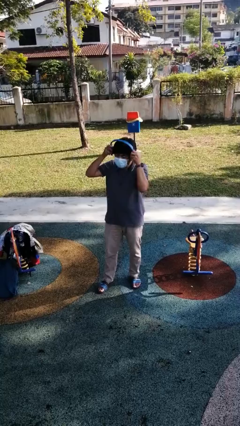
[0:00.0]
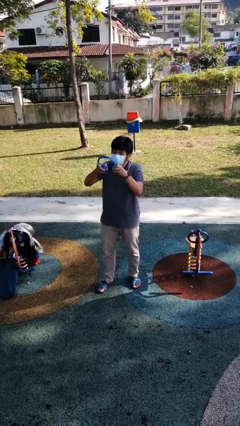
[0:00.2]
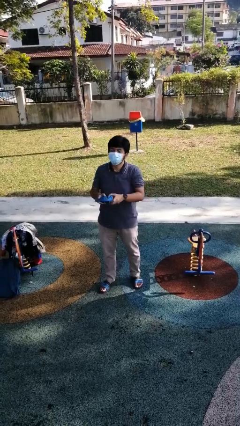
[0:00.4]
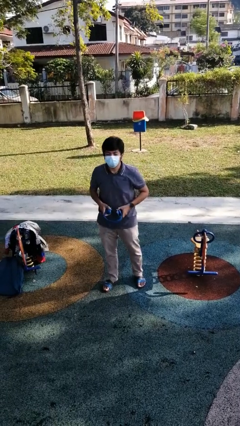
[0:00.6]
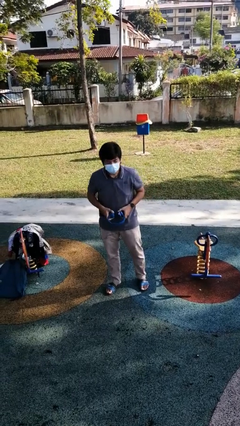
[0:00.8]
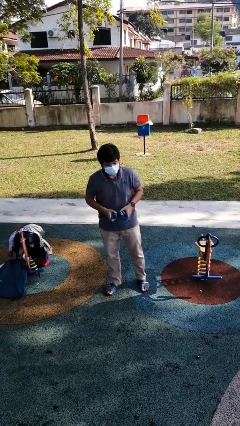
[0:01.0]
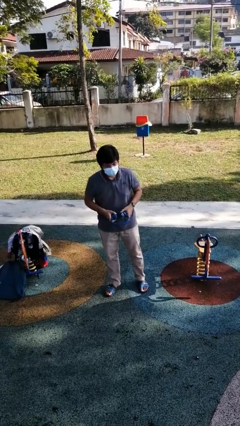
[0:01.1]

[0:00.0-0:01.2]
person takes off headphones

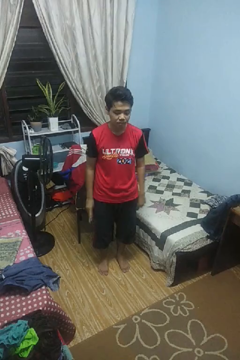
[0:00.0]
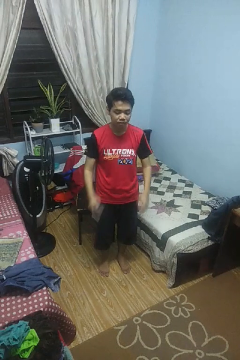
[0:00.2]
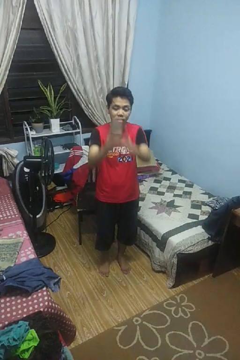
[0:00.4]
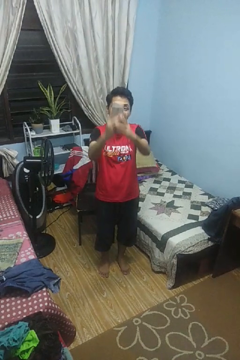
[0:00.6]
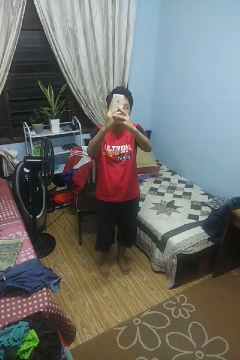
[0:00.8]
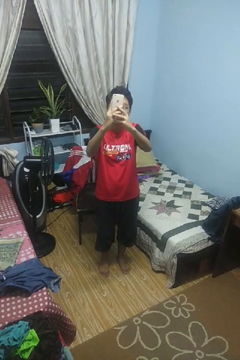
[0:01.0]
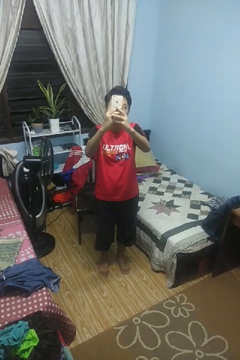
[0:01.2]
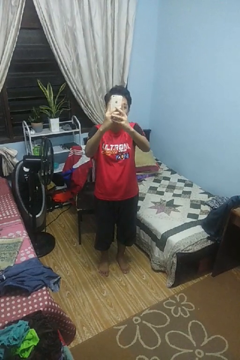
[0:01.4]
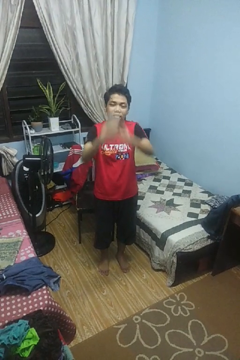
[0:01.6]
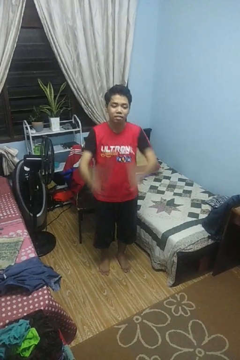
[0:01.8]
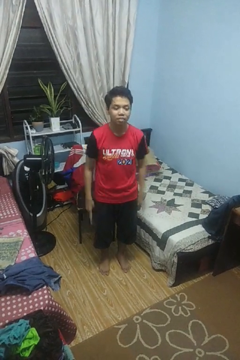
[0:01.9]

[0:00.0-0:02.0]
person takes selfie

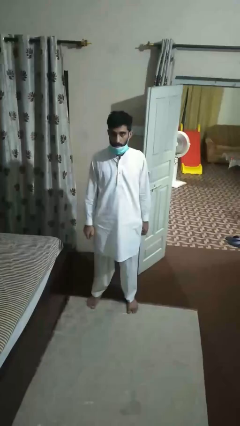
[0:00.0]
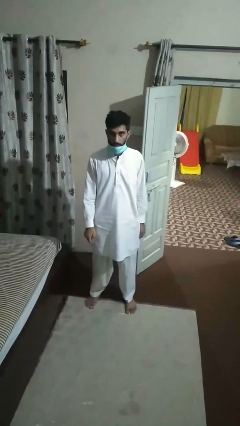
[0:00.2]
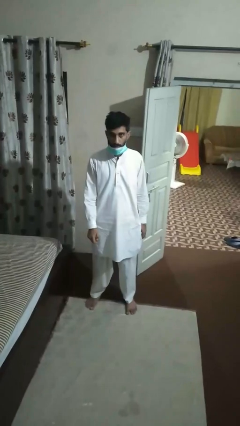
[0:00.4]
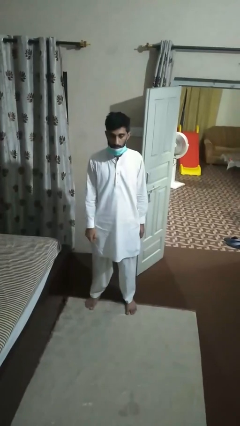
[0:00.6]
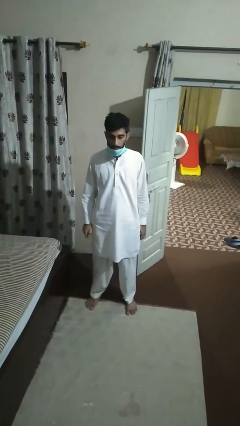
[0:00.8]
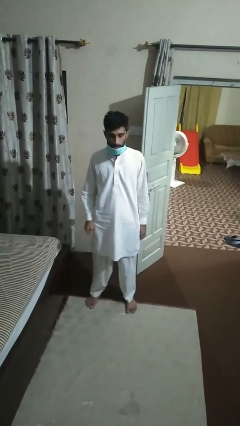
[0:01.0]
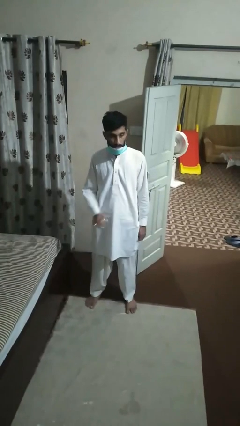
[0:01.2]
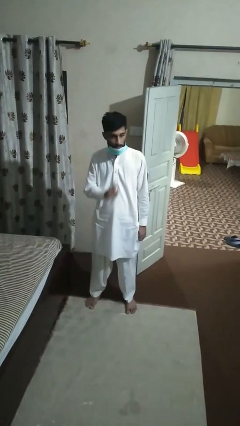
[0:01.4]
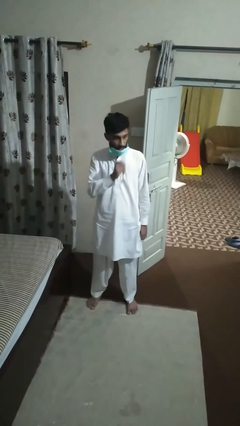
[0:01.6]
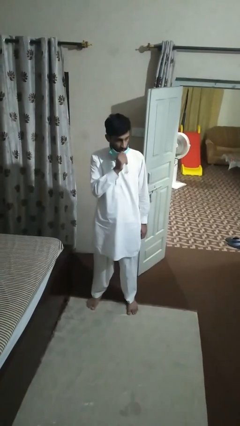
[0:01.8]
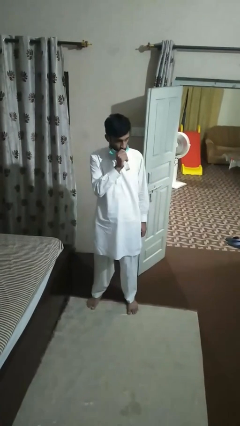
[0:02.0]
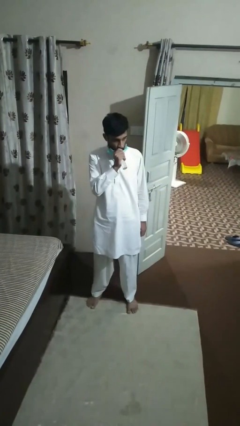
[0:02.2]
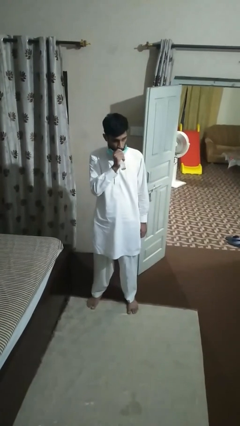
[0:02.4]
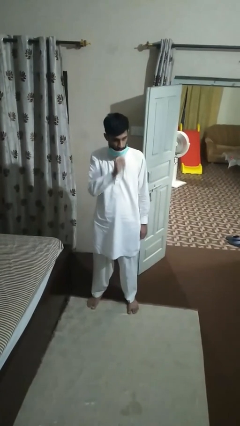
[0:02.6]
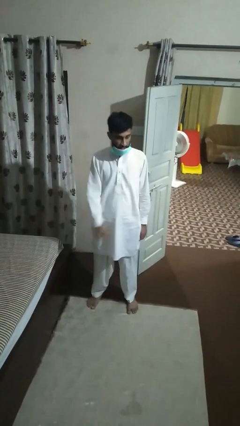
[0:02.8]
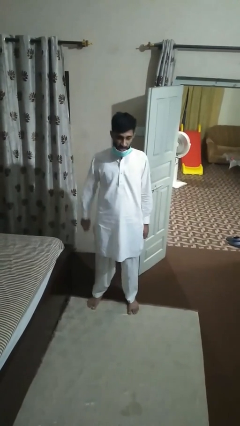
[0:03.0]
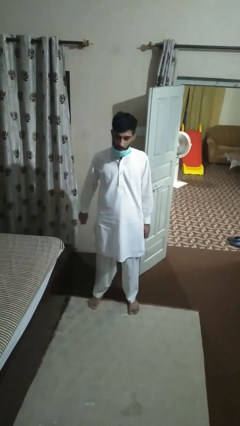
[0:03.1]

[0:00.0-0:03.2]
person vapes

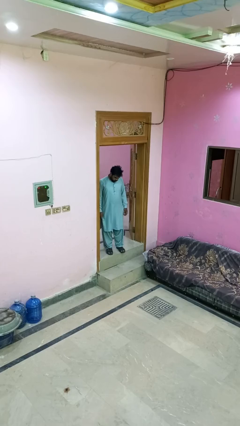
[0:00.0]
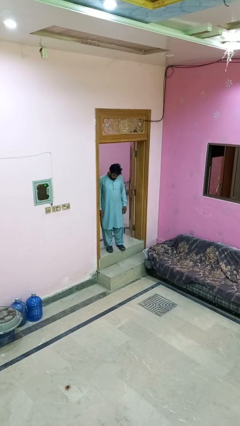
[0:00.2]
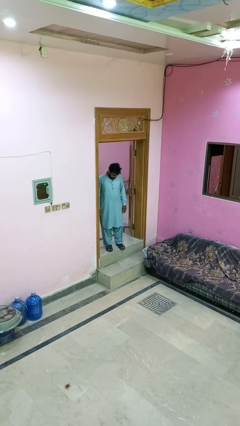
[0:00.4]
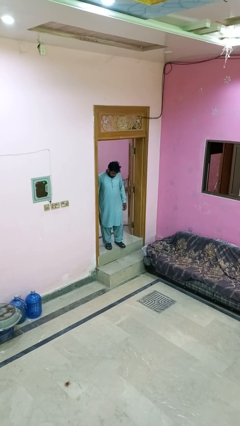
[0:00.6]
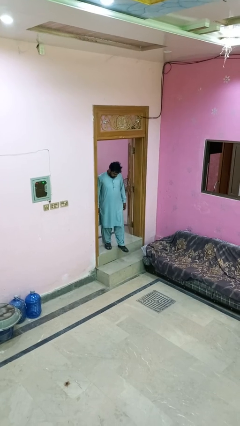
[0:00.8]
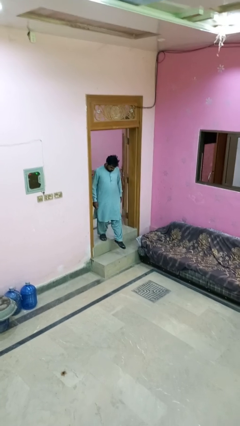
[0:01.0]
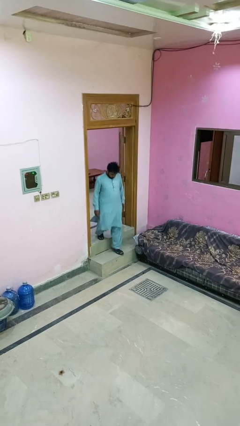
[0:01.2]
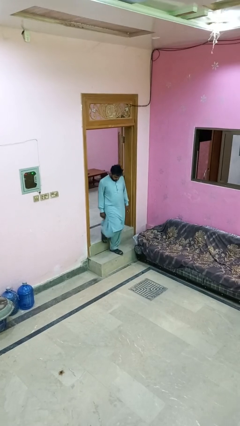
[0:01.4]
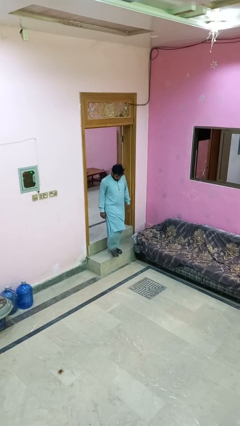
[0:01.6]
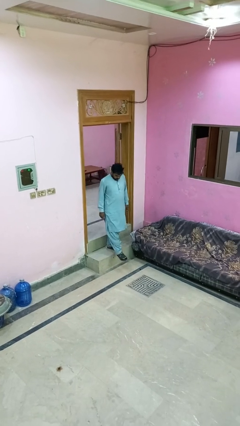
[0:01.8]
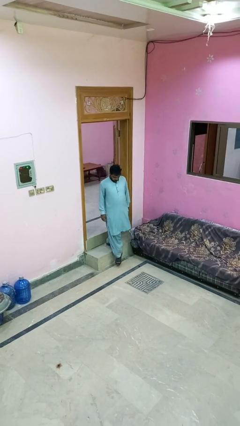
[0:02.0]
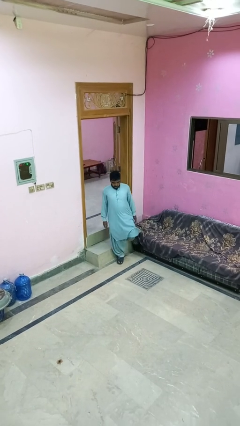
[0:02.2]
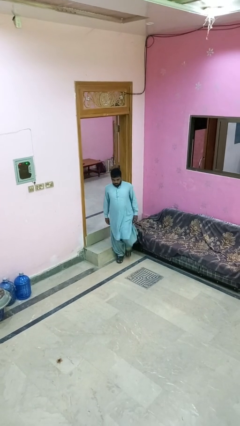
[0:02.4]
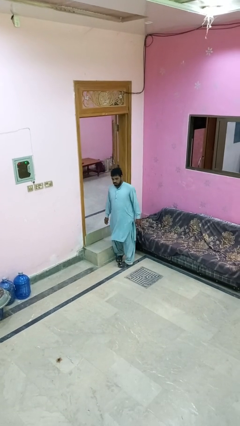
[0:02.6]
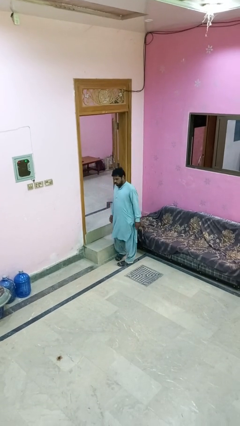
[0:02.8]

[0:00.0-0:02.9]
person climbs down stairs

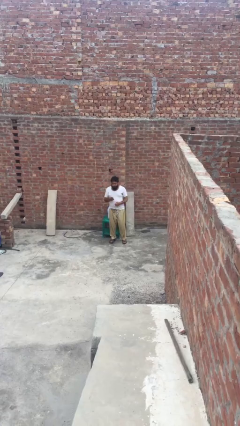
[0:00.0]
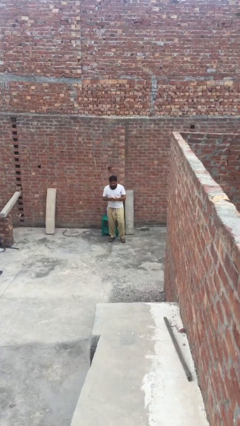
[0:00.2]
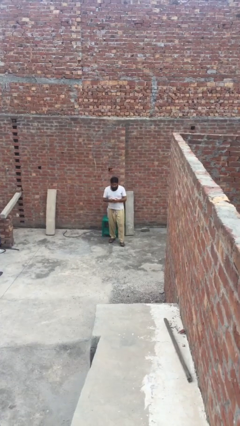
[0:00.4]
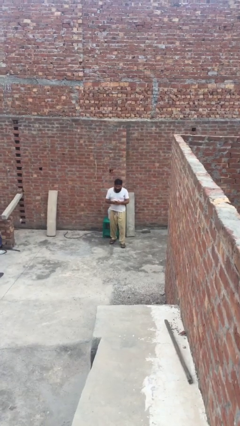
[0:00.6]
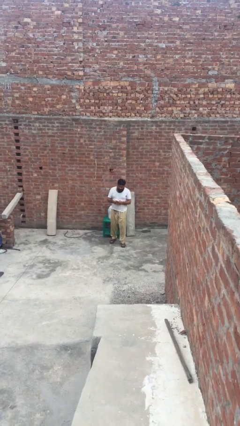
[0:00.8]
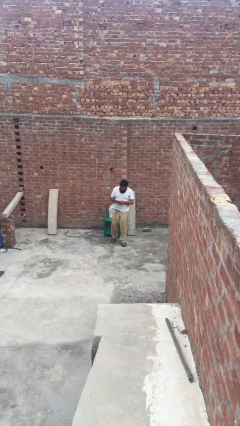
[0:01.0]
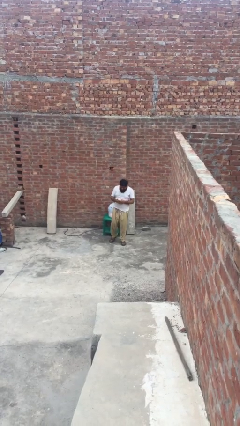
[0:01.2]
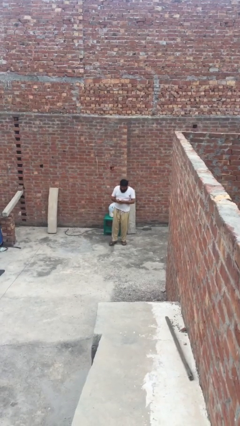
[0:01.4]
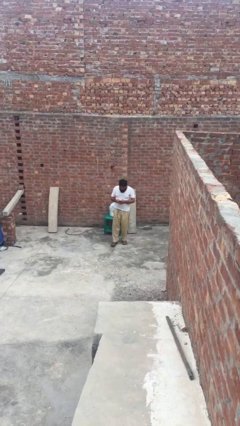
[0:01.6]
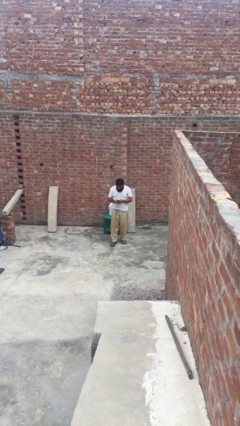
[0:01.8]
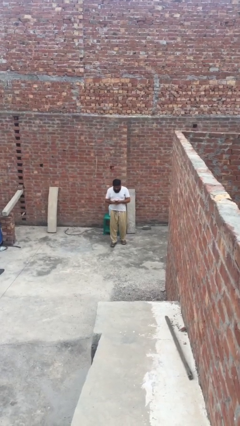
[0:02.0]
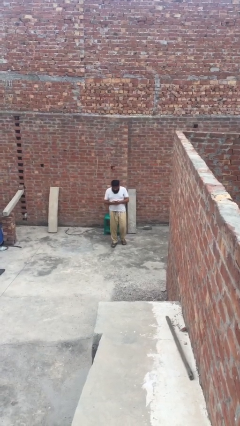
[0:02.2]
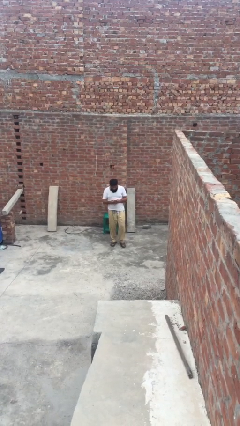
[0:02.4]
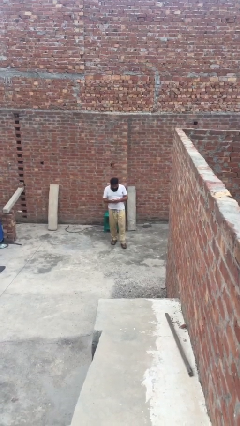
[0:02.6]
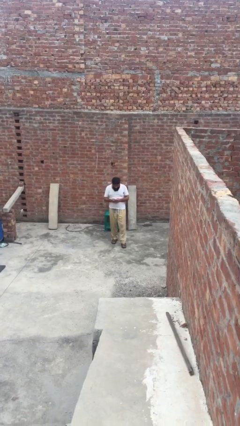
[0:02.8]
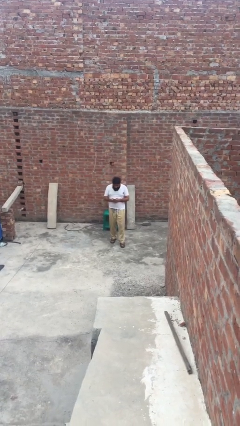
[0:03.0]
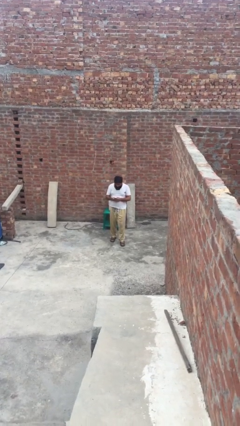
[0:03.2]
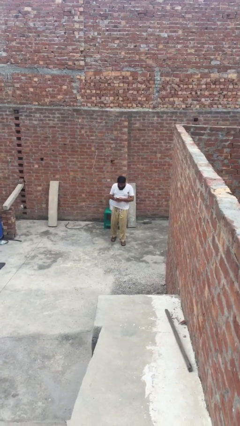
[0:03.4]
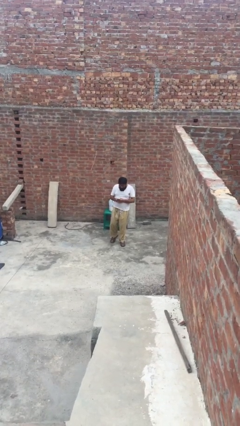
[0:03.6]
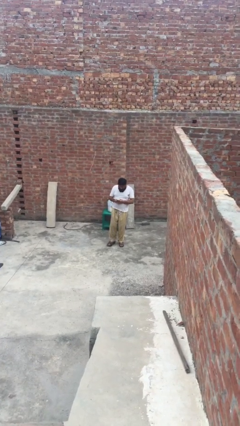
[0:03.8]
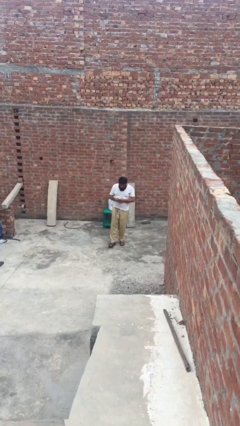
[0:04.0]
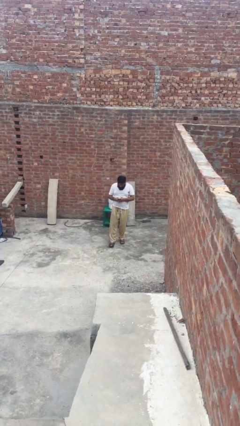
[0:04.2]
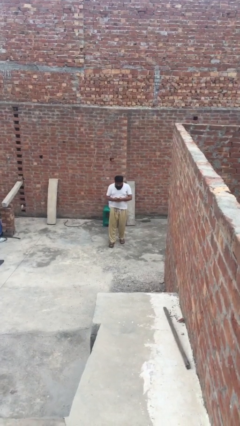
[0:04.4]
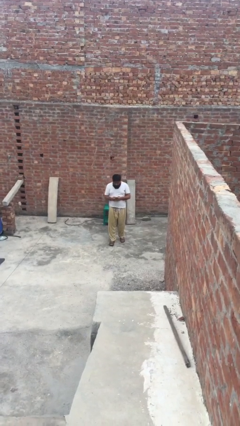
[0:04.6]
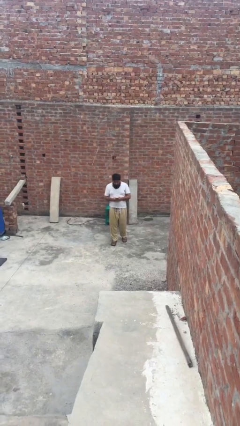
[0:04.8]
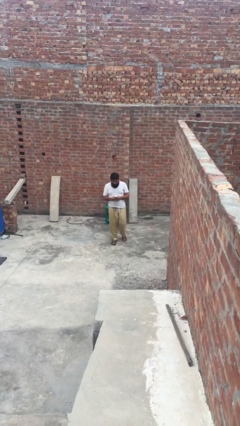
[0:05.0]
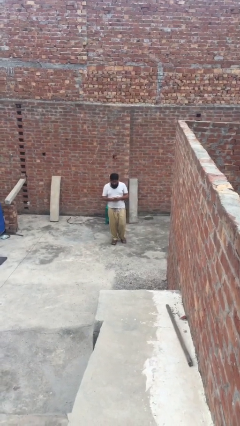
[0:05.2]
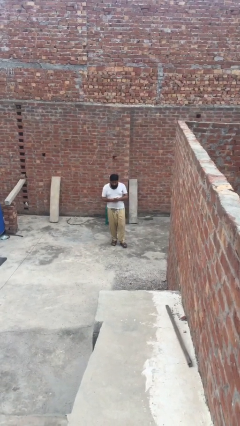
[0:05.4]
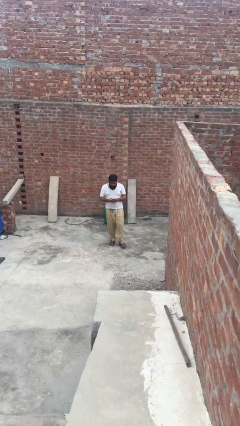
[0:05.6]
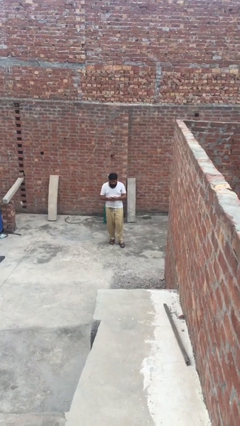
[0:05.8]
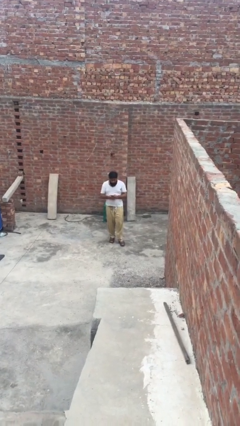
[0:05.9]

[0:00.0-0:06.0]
person texts on phone

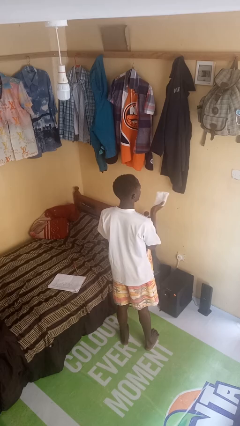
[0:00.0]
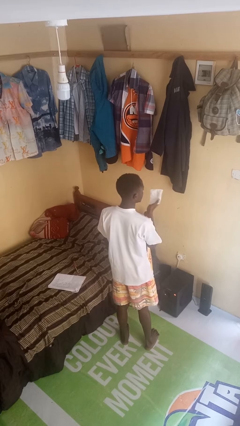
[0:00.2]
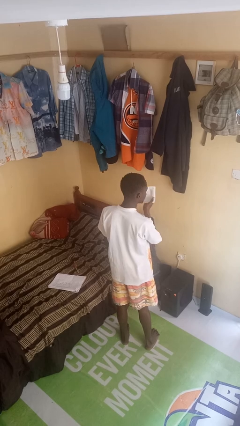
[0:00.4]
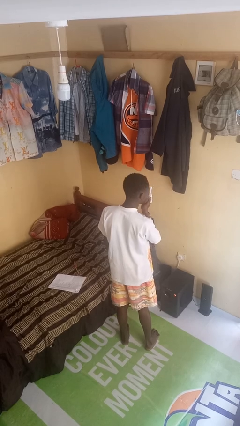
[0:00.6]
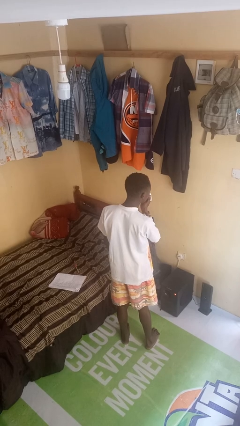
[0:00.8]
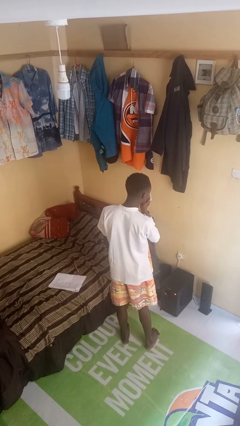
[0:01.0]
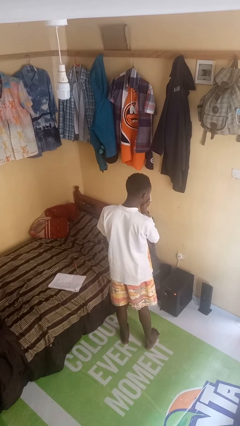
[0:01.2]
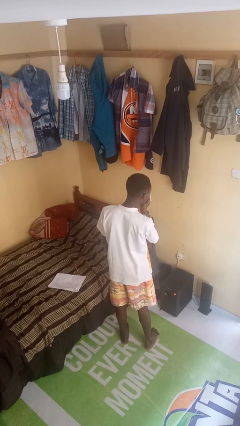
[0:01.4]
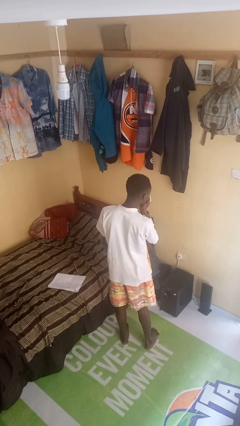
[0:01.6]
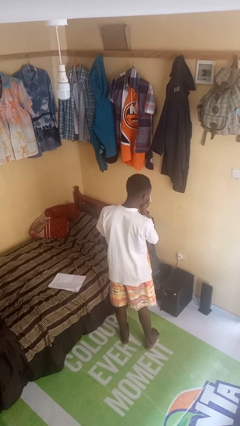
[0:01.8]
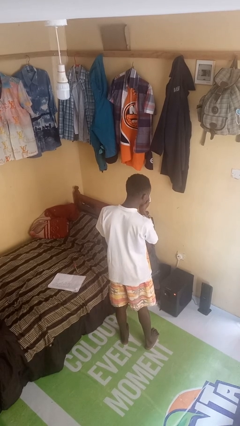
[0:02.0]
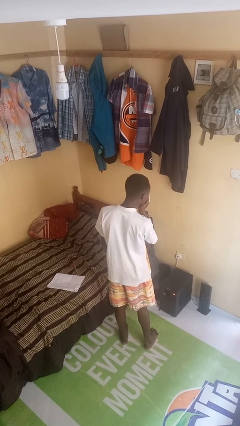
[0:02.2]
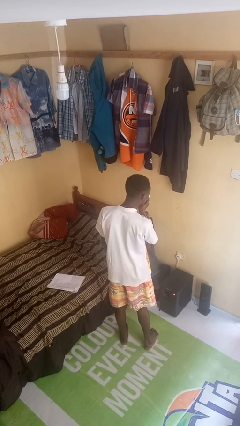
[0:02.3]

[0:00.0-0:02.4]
person blows nose

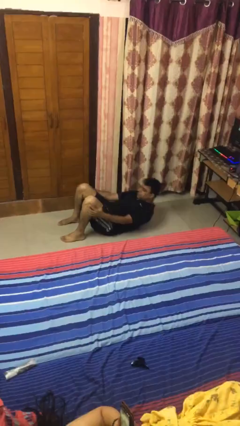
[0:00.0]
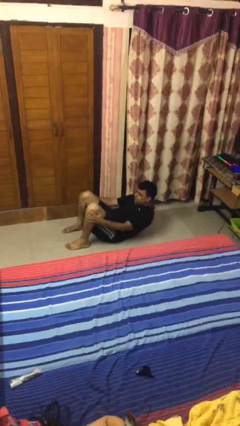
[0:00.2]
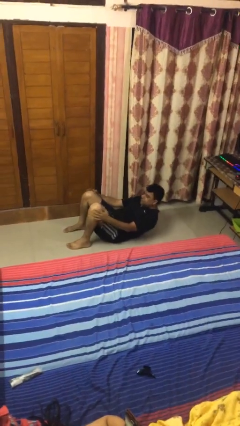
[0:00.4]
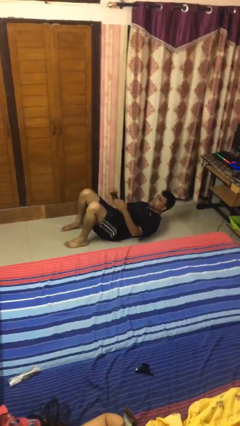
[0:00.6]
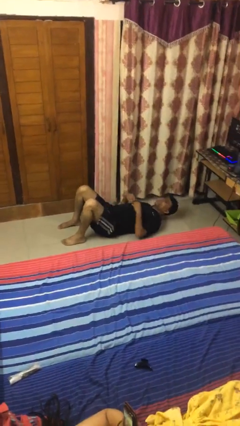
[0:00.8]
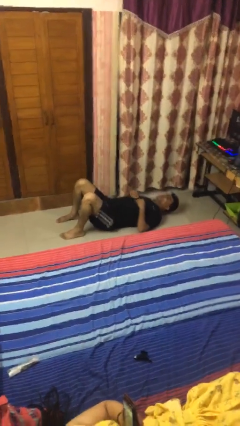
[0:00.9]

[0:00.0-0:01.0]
person exercises with situp
